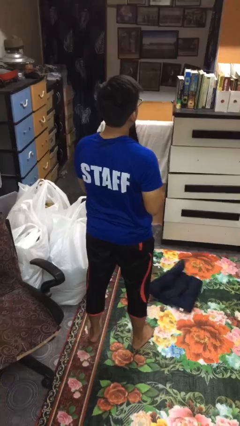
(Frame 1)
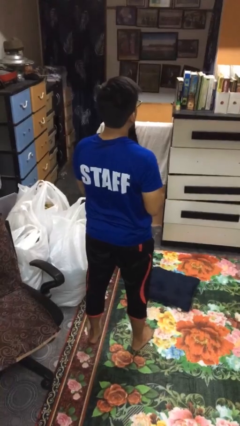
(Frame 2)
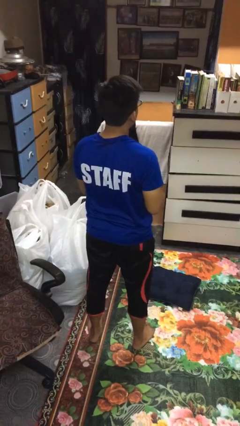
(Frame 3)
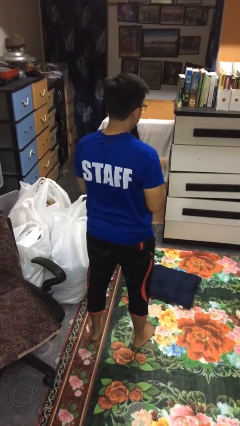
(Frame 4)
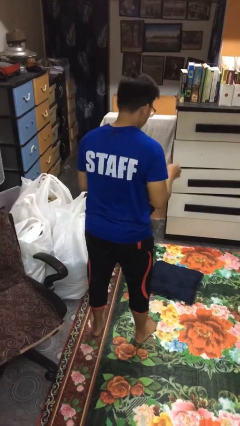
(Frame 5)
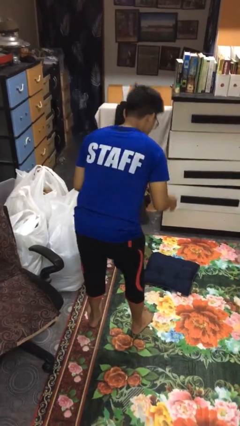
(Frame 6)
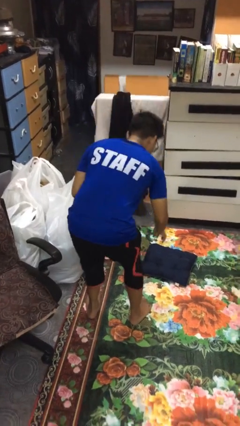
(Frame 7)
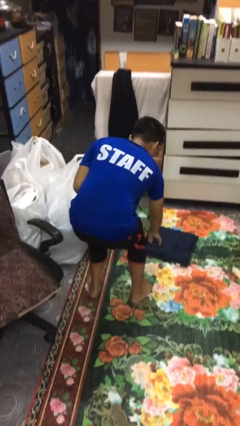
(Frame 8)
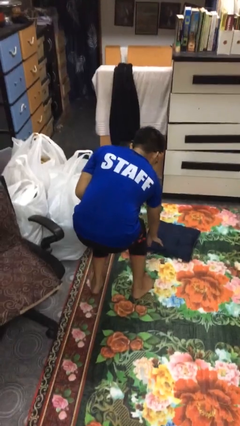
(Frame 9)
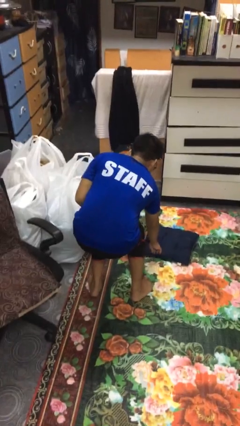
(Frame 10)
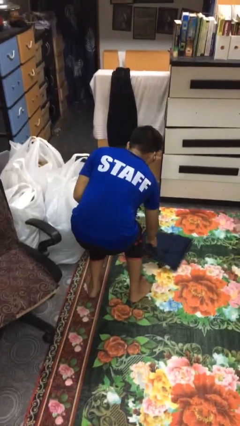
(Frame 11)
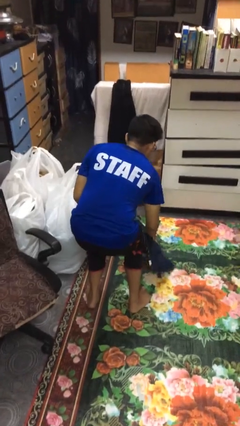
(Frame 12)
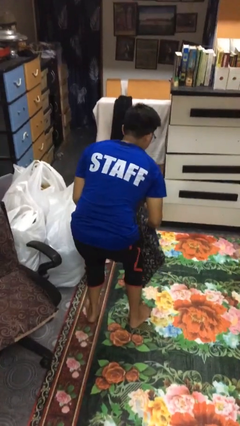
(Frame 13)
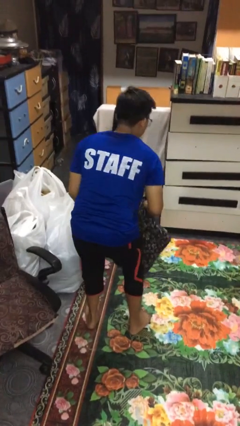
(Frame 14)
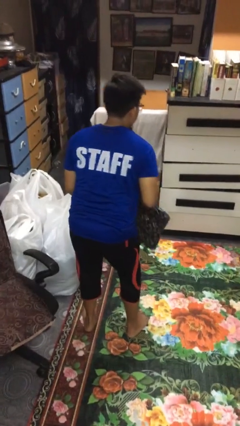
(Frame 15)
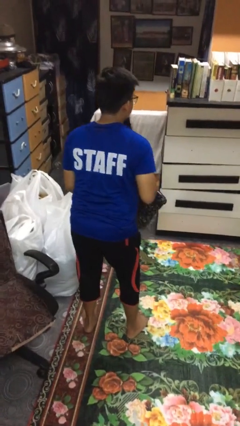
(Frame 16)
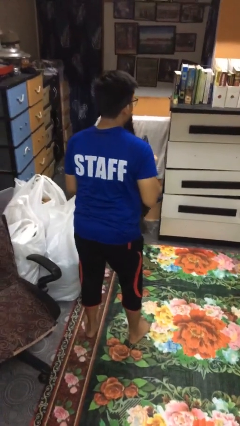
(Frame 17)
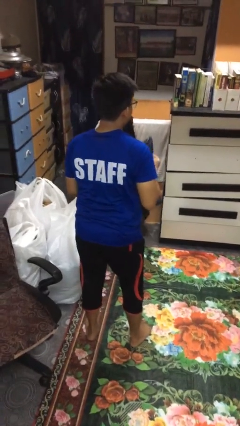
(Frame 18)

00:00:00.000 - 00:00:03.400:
person picks up object from floor

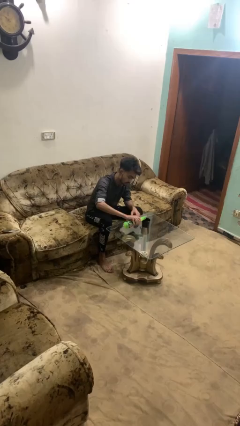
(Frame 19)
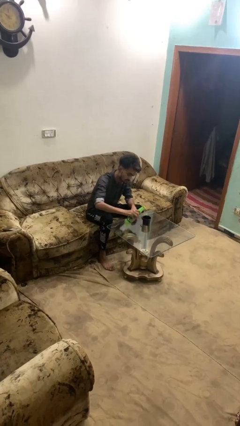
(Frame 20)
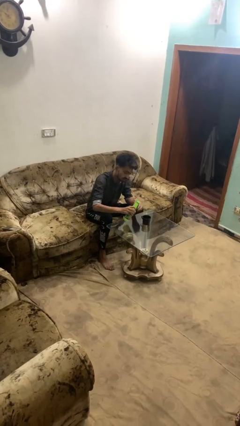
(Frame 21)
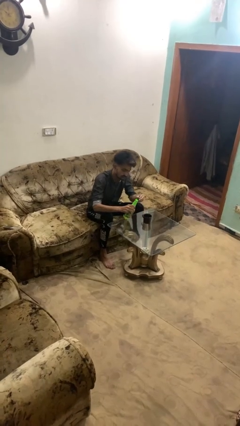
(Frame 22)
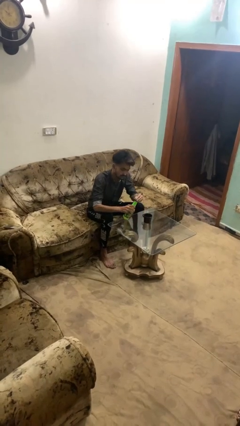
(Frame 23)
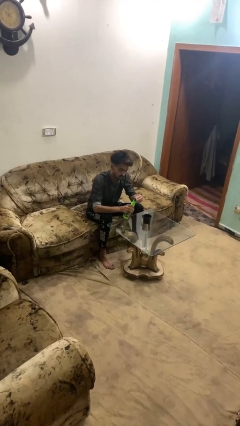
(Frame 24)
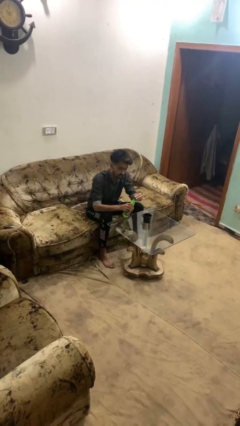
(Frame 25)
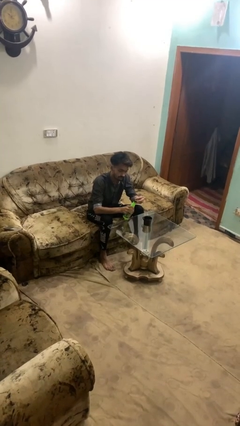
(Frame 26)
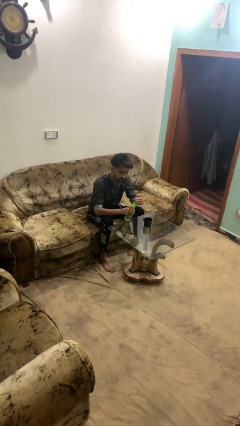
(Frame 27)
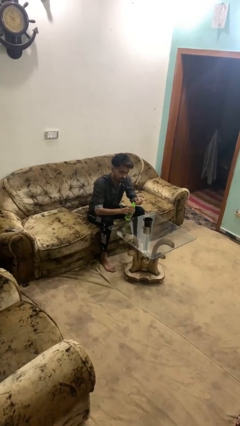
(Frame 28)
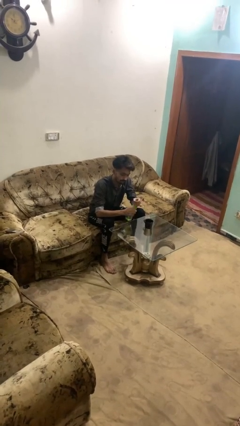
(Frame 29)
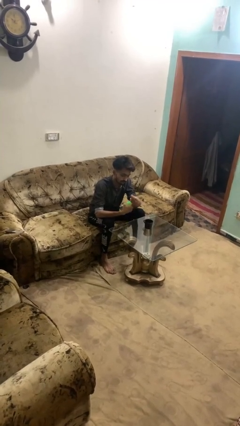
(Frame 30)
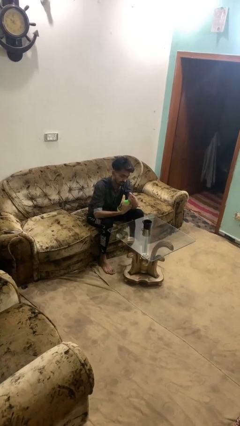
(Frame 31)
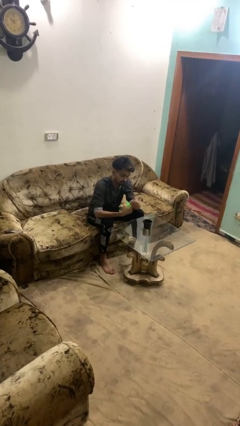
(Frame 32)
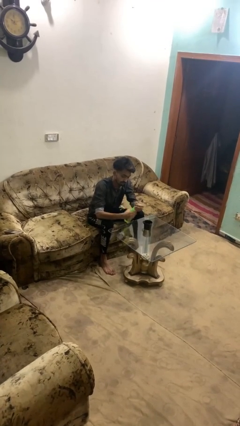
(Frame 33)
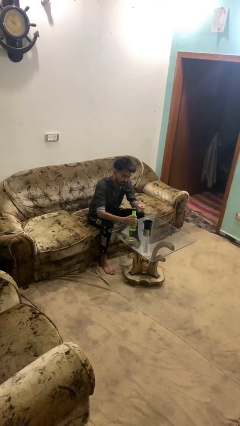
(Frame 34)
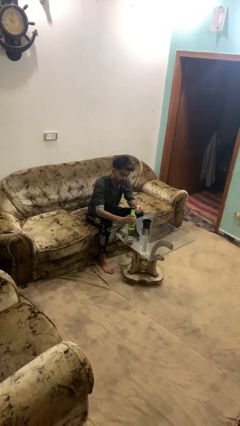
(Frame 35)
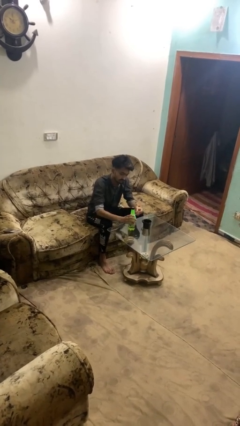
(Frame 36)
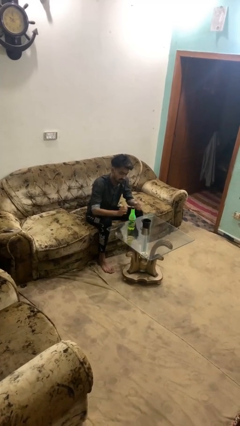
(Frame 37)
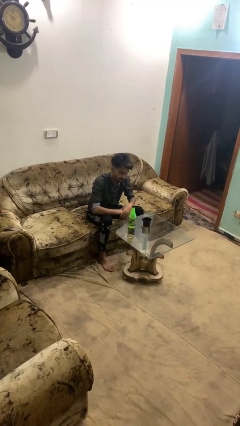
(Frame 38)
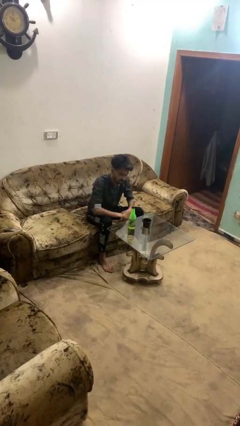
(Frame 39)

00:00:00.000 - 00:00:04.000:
person screws lid to bottle

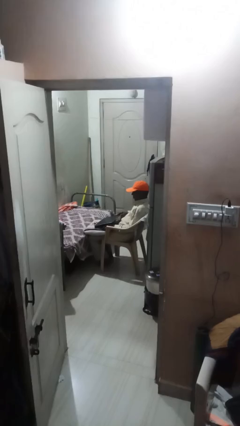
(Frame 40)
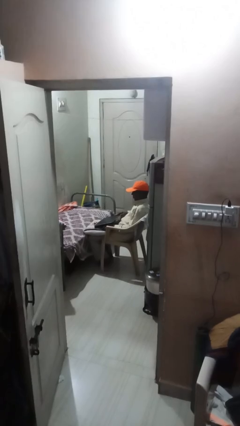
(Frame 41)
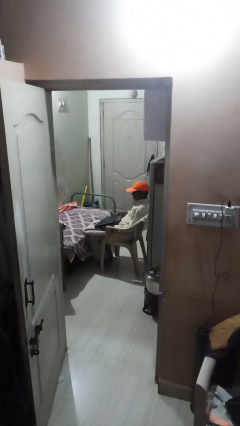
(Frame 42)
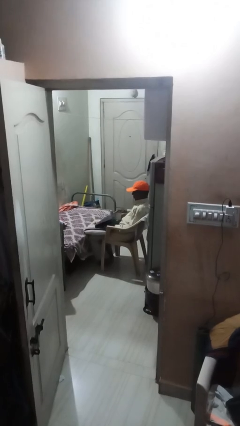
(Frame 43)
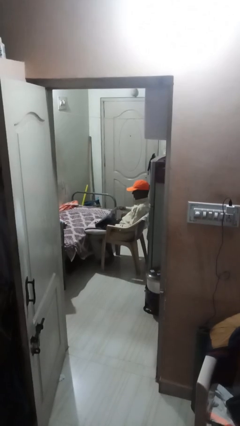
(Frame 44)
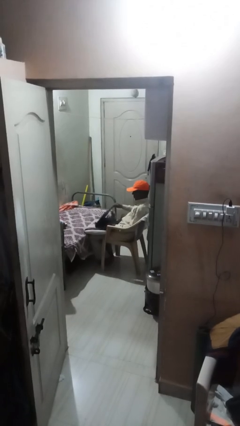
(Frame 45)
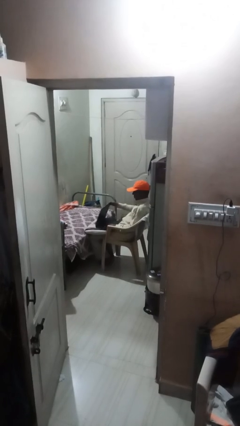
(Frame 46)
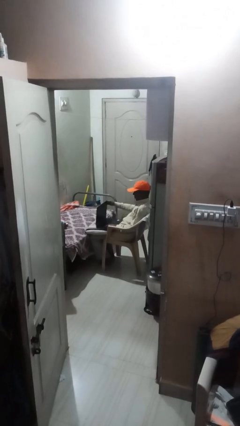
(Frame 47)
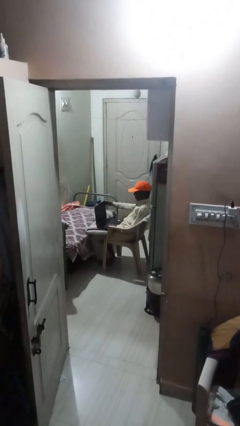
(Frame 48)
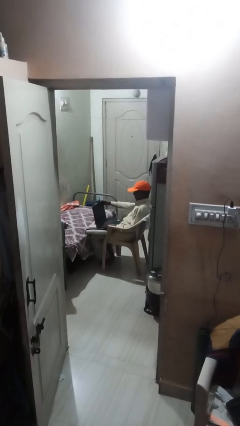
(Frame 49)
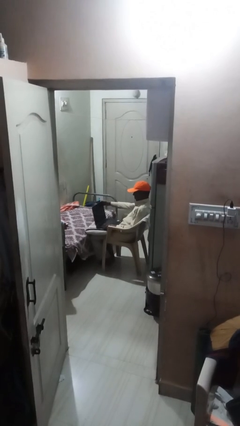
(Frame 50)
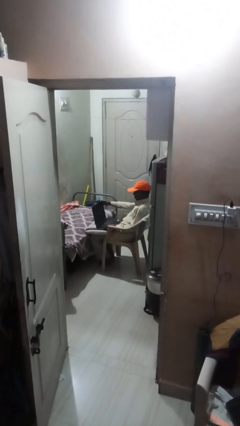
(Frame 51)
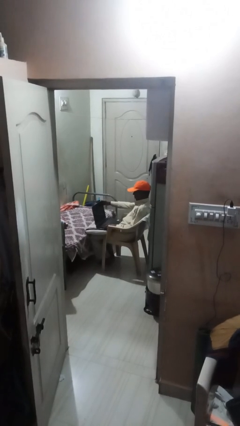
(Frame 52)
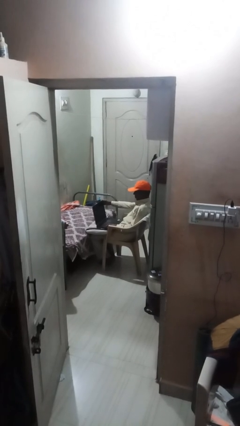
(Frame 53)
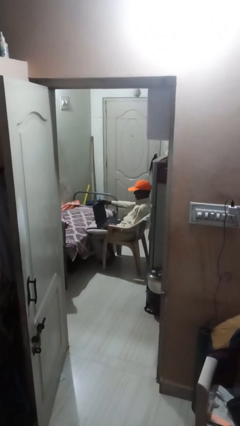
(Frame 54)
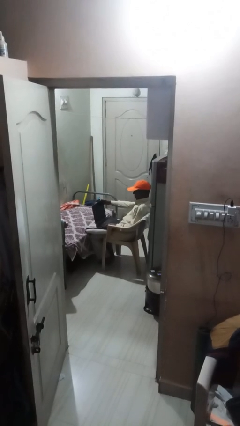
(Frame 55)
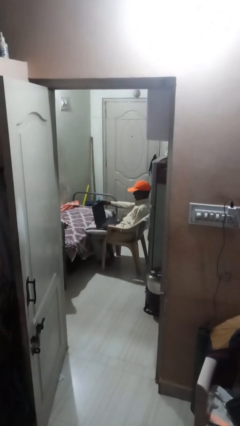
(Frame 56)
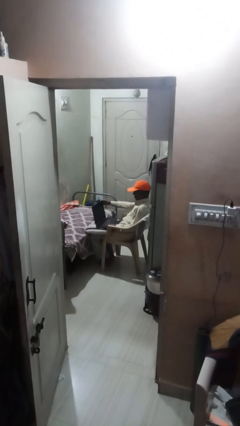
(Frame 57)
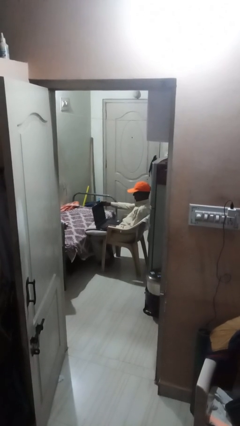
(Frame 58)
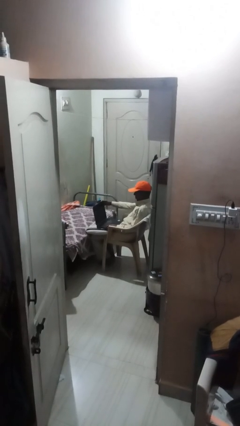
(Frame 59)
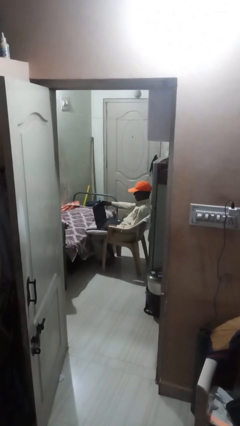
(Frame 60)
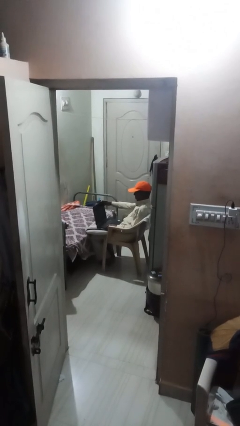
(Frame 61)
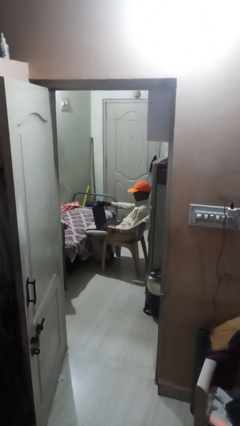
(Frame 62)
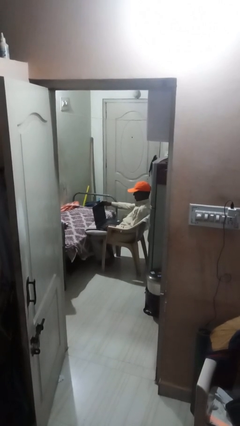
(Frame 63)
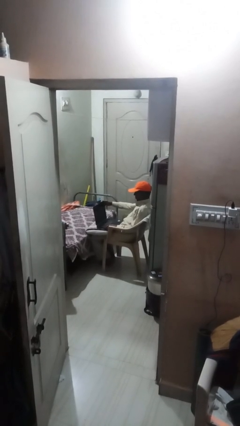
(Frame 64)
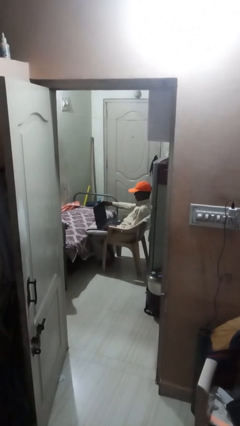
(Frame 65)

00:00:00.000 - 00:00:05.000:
person interacts with laptop

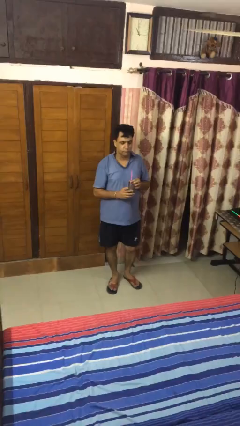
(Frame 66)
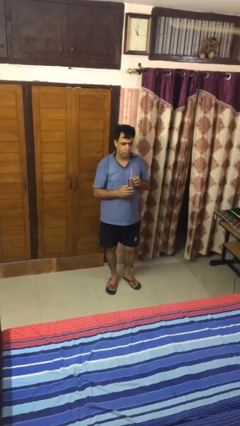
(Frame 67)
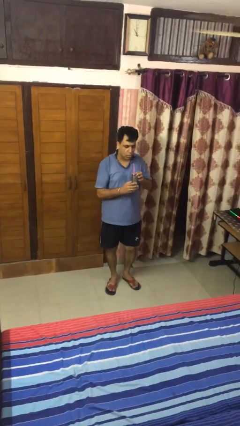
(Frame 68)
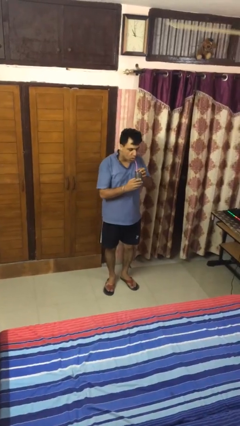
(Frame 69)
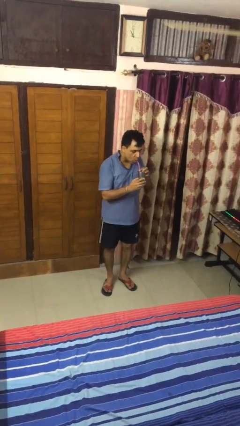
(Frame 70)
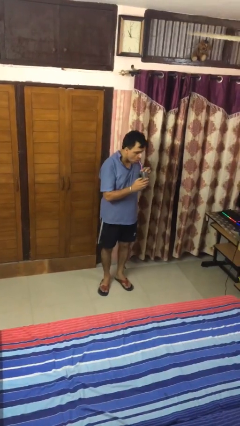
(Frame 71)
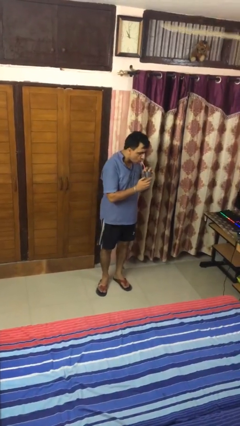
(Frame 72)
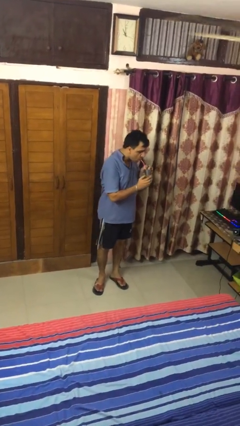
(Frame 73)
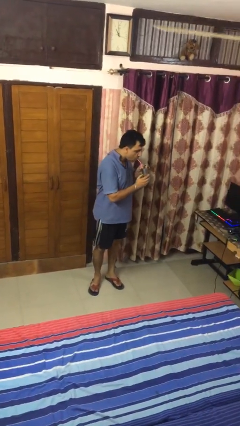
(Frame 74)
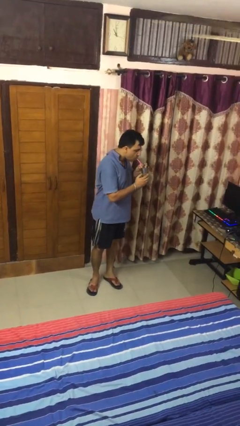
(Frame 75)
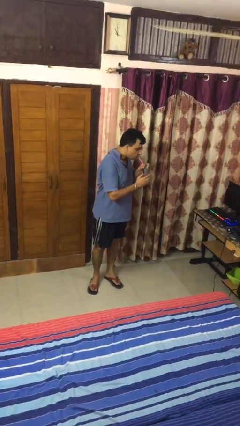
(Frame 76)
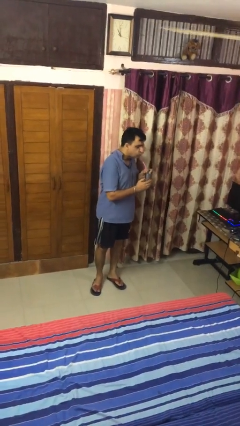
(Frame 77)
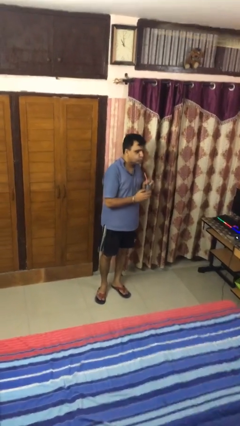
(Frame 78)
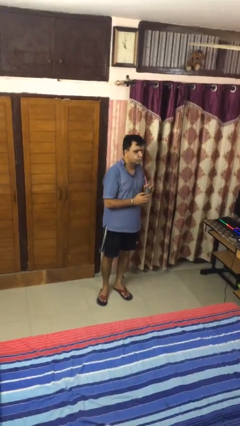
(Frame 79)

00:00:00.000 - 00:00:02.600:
person drinks from straw

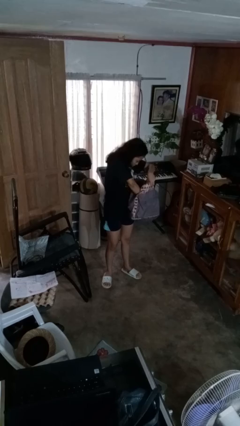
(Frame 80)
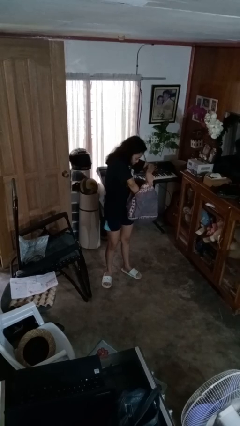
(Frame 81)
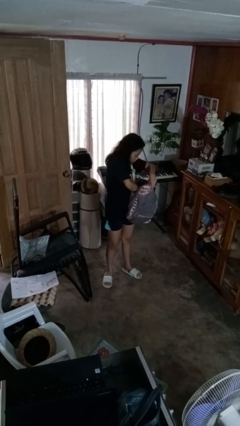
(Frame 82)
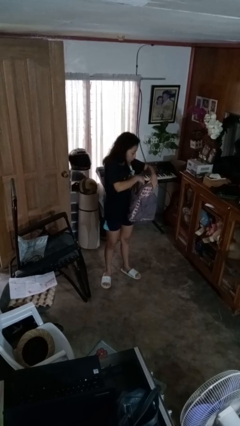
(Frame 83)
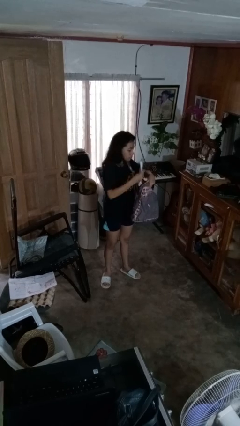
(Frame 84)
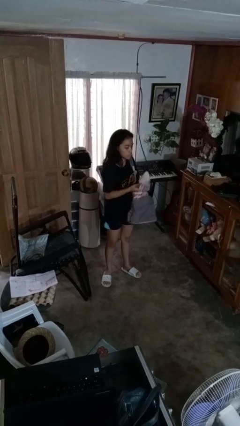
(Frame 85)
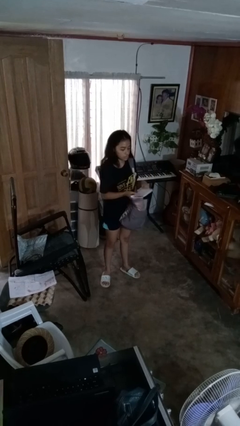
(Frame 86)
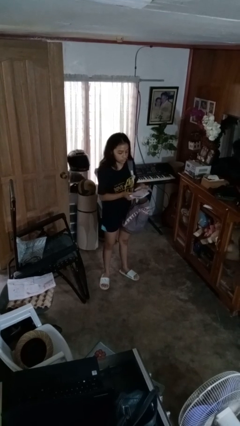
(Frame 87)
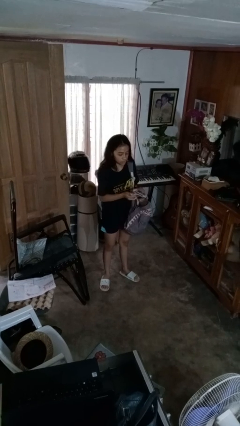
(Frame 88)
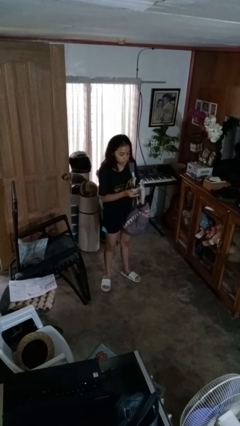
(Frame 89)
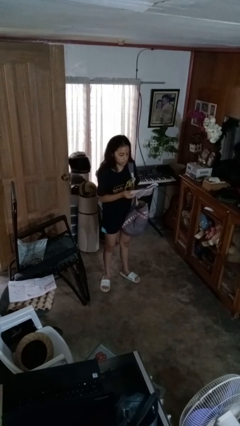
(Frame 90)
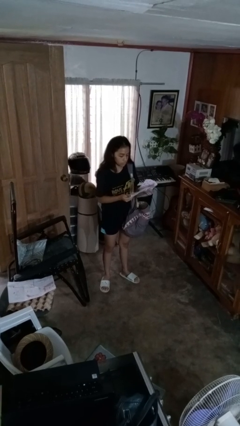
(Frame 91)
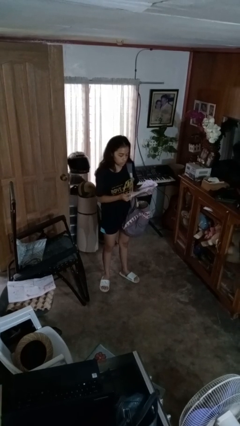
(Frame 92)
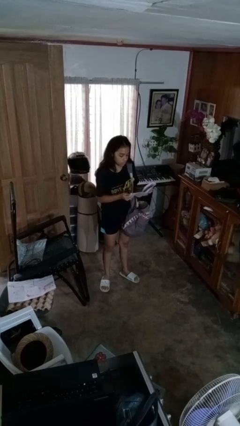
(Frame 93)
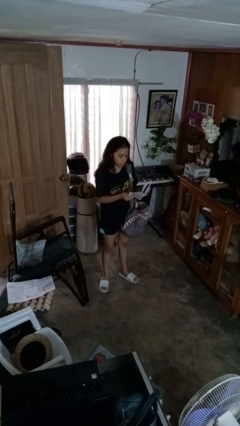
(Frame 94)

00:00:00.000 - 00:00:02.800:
person takes object from backpack
